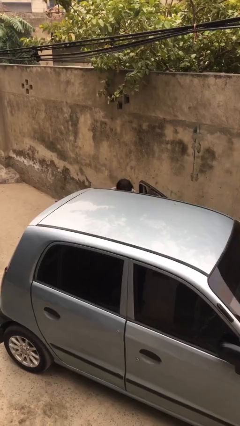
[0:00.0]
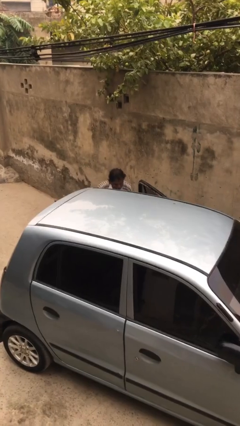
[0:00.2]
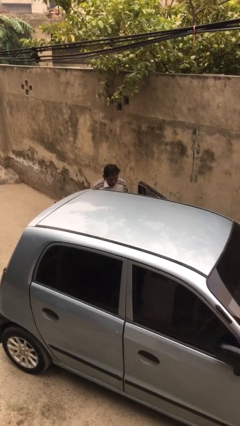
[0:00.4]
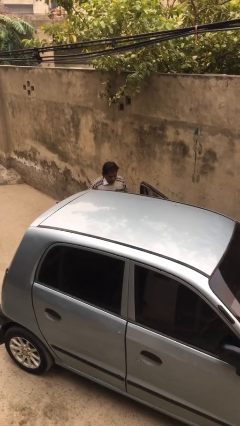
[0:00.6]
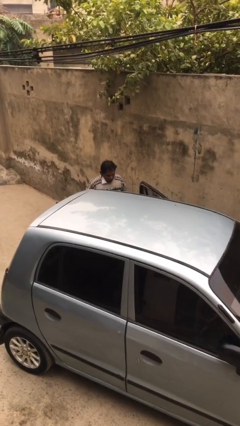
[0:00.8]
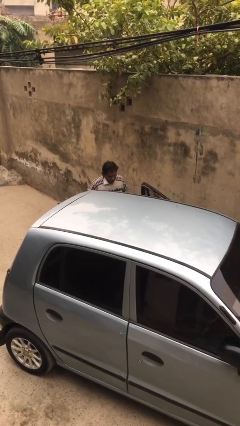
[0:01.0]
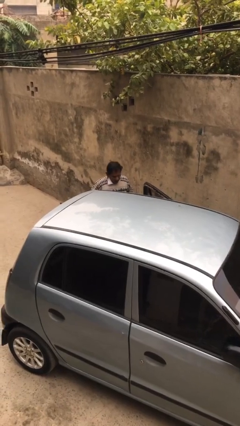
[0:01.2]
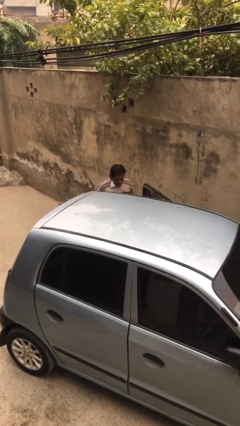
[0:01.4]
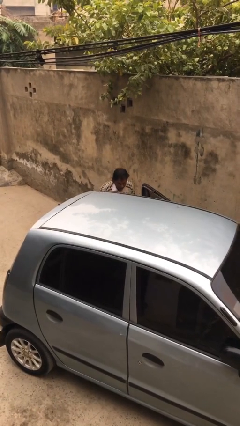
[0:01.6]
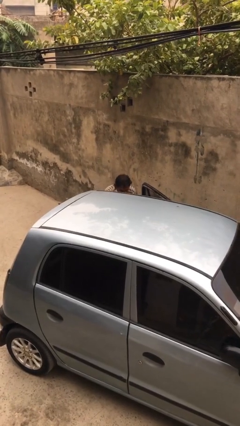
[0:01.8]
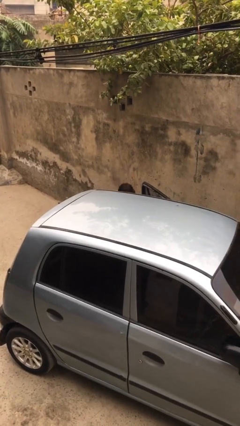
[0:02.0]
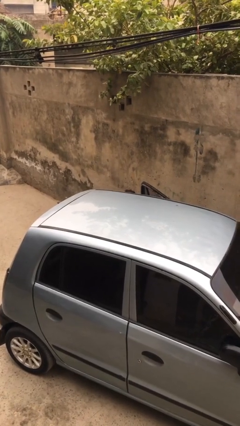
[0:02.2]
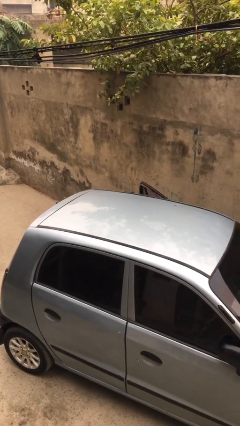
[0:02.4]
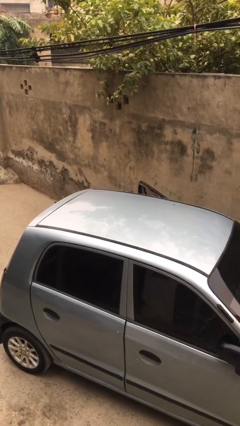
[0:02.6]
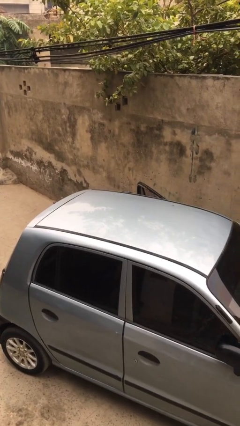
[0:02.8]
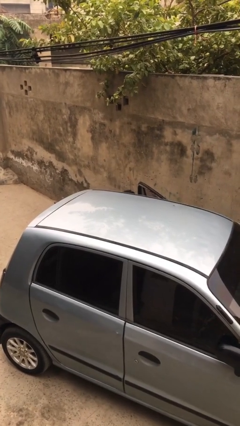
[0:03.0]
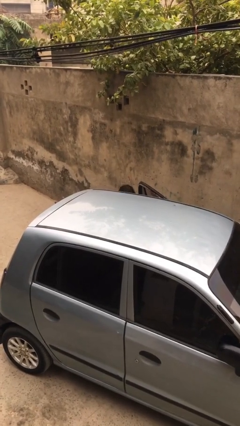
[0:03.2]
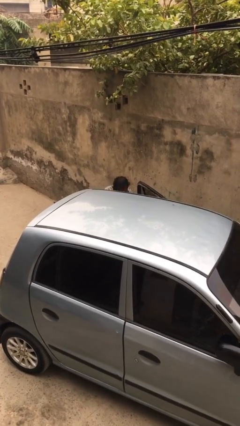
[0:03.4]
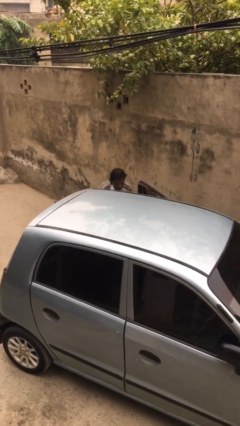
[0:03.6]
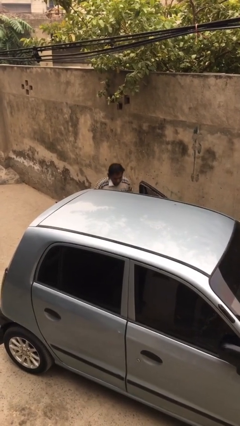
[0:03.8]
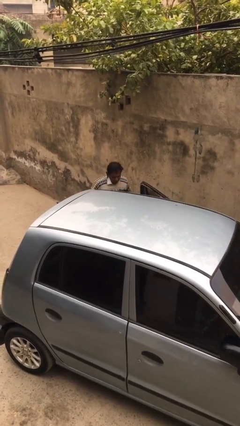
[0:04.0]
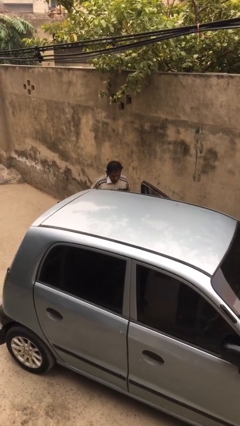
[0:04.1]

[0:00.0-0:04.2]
person unloads car

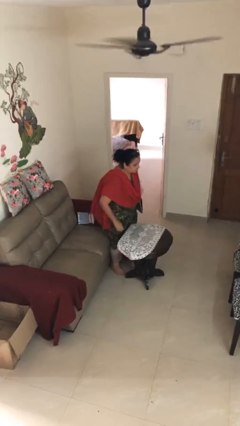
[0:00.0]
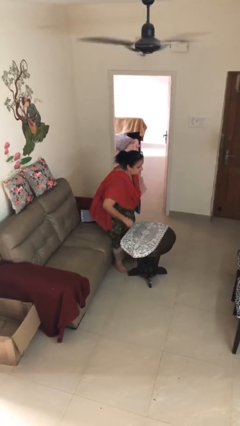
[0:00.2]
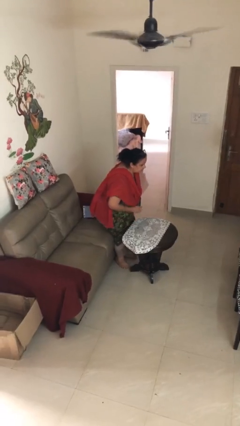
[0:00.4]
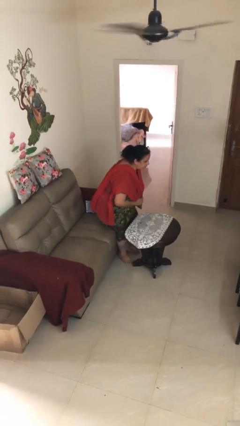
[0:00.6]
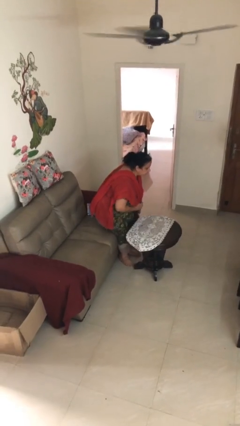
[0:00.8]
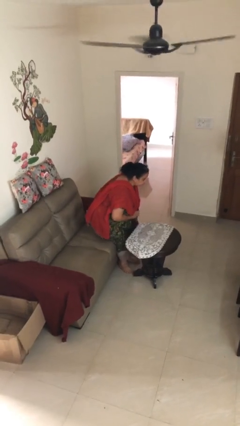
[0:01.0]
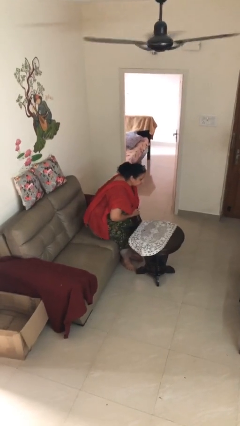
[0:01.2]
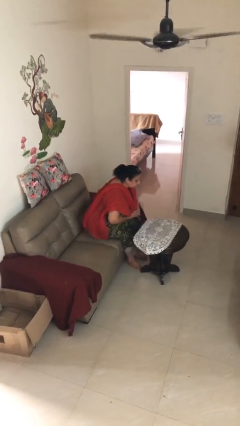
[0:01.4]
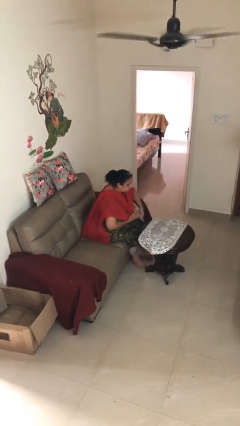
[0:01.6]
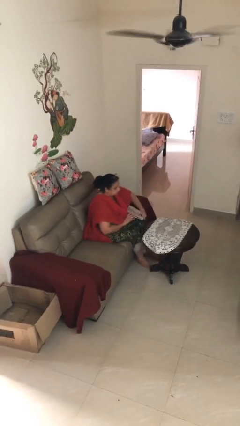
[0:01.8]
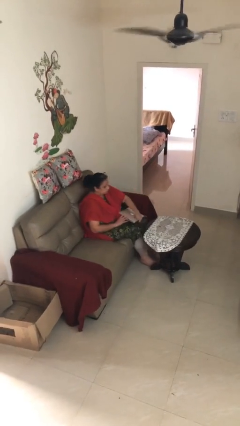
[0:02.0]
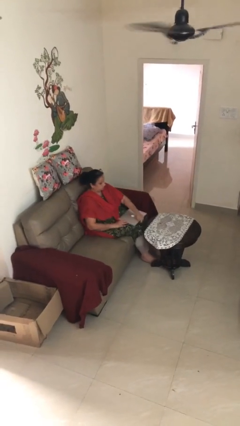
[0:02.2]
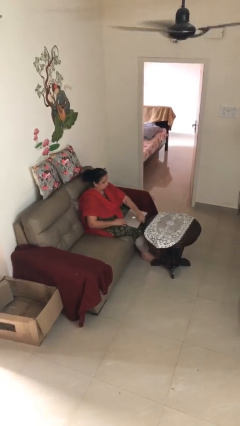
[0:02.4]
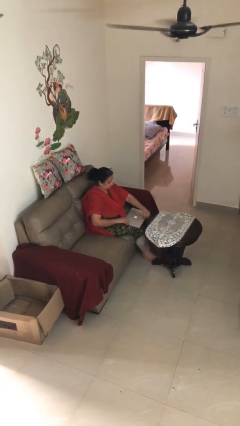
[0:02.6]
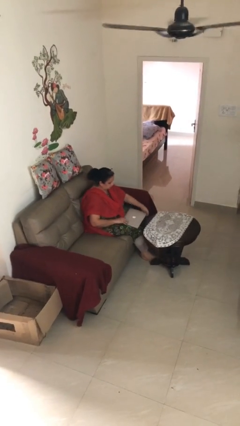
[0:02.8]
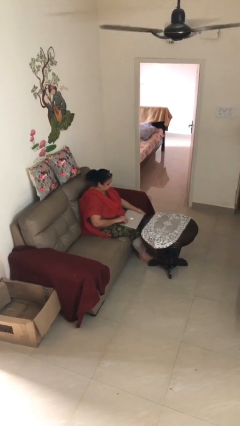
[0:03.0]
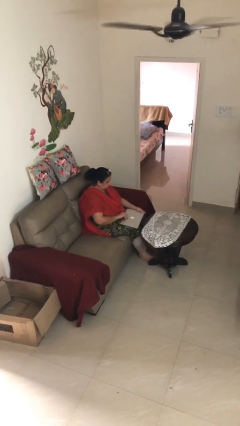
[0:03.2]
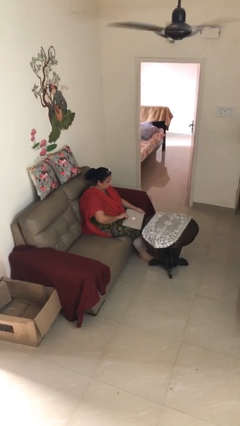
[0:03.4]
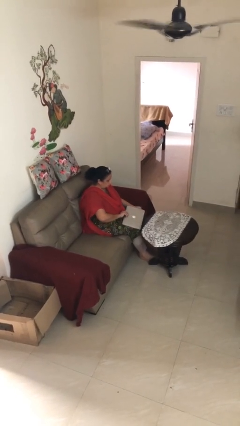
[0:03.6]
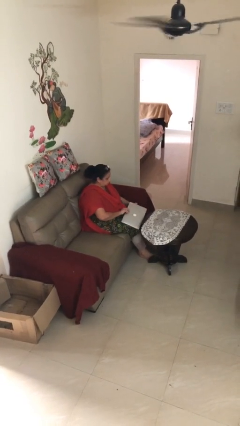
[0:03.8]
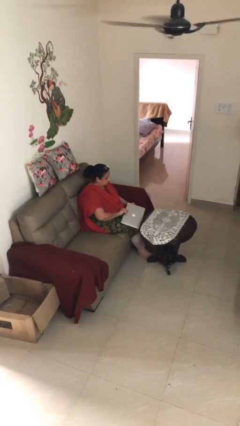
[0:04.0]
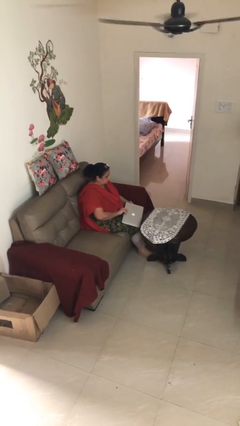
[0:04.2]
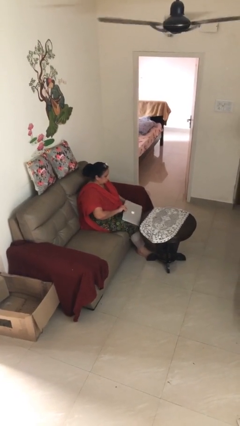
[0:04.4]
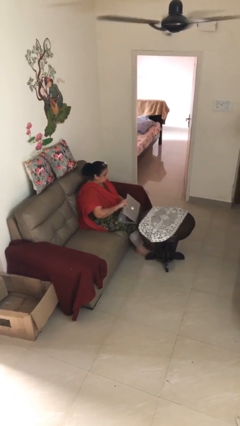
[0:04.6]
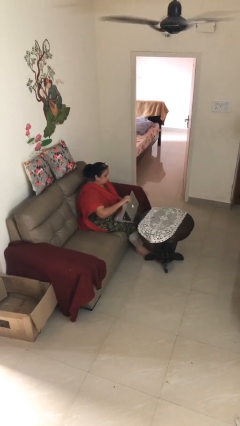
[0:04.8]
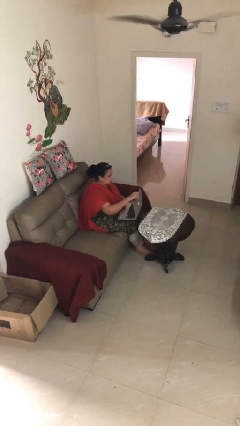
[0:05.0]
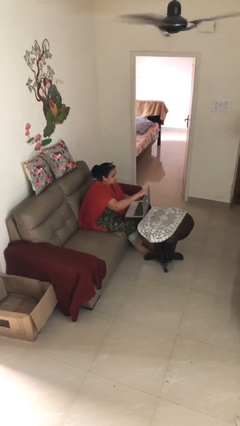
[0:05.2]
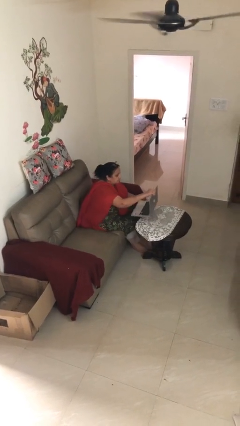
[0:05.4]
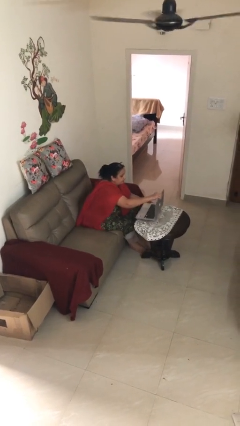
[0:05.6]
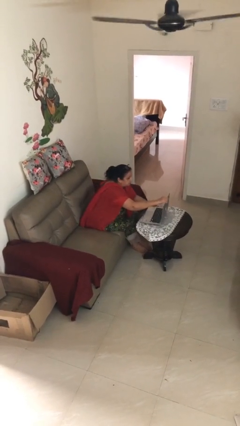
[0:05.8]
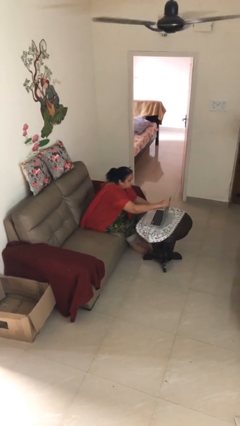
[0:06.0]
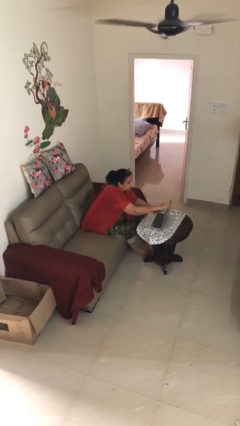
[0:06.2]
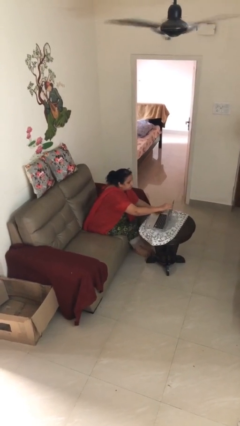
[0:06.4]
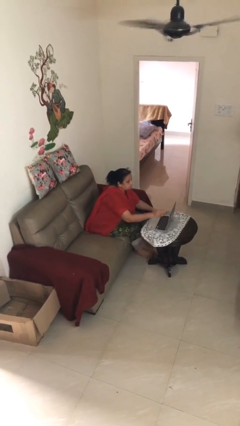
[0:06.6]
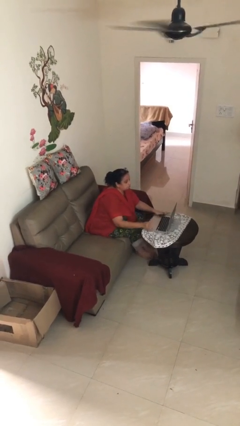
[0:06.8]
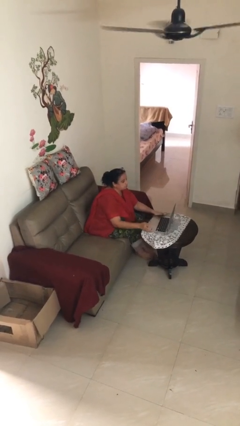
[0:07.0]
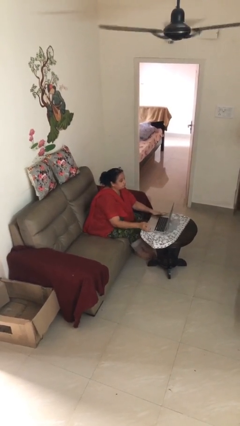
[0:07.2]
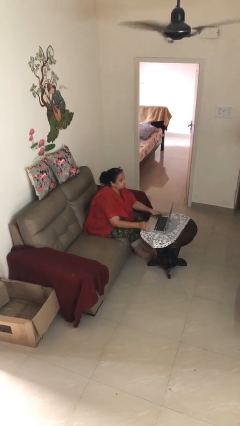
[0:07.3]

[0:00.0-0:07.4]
person sits down

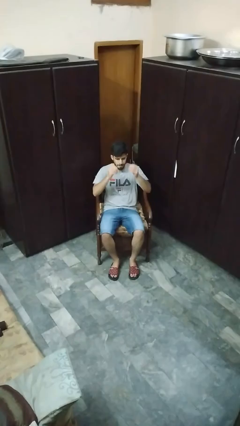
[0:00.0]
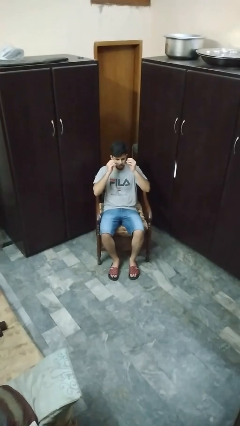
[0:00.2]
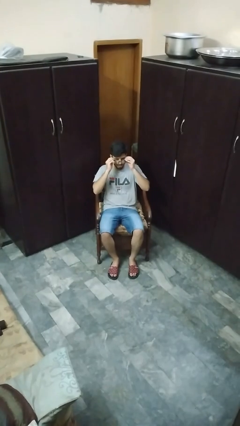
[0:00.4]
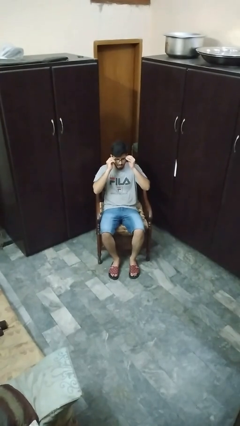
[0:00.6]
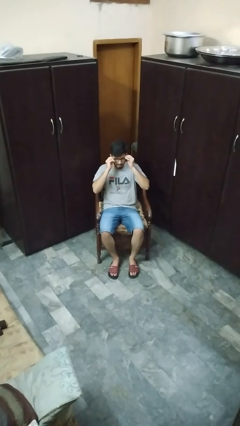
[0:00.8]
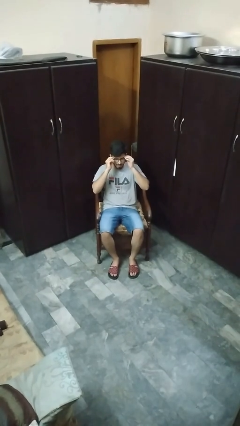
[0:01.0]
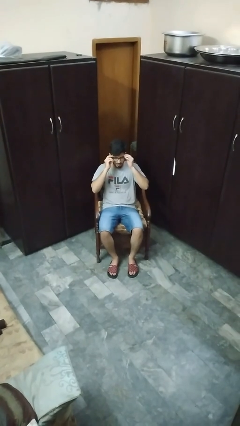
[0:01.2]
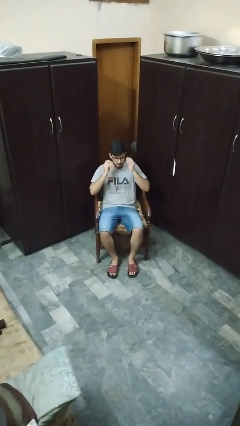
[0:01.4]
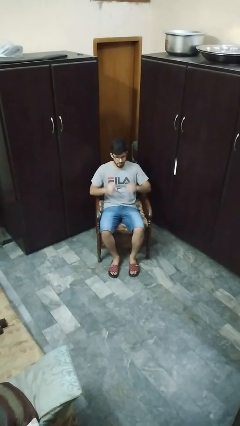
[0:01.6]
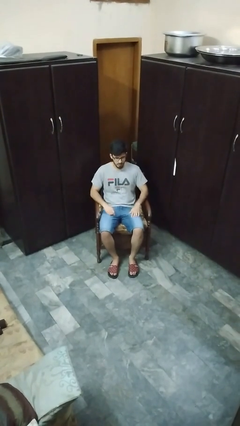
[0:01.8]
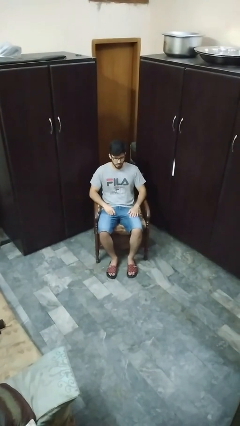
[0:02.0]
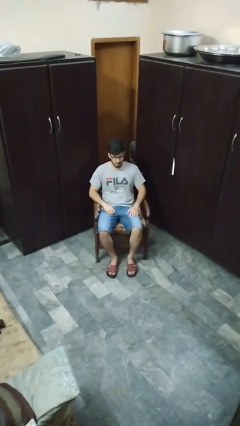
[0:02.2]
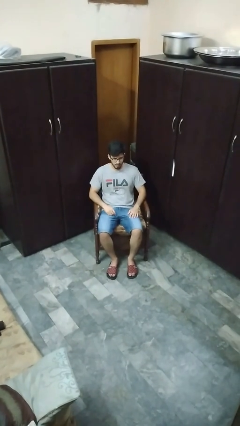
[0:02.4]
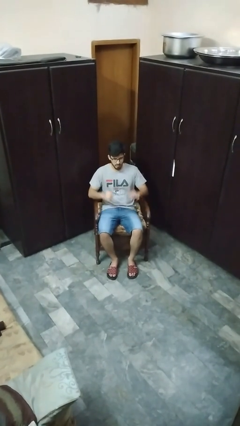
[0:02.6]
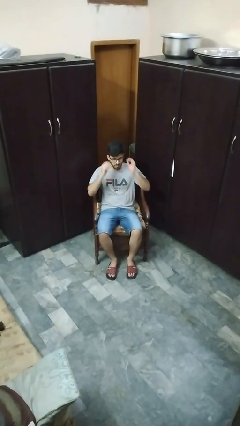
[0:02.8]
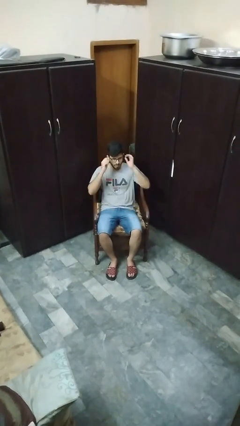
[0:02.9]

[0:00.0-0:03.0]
person puts on glasses

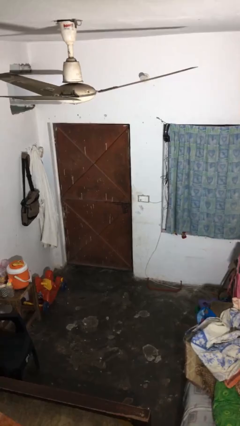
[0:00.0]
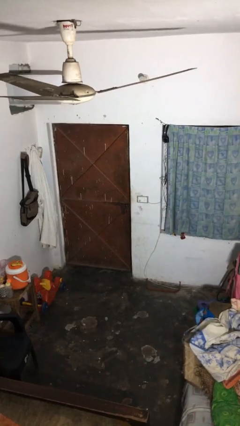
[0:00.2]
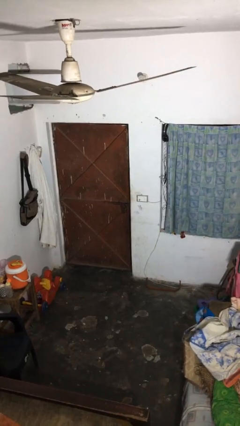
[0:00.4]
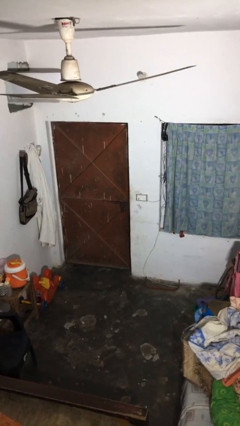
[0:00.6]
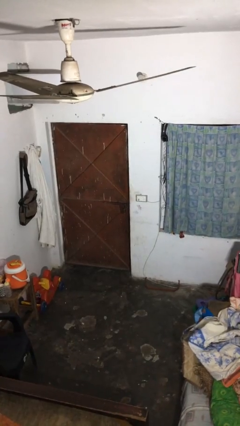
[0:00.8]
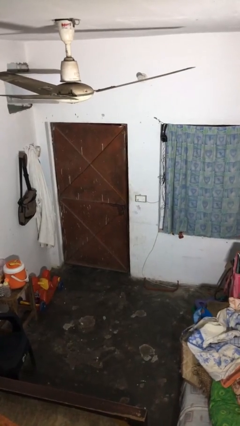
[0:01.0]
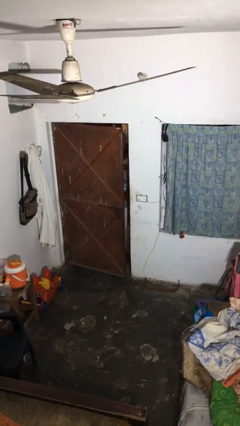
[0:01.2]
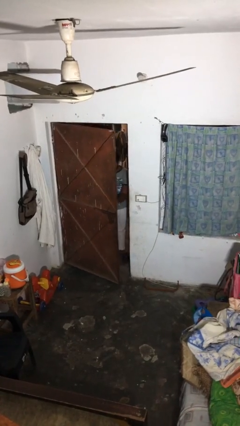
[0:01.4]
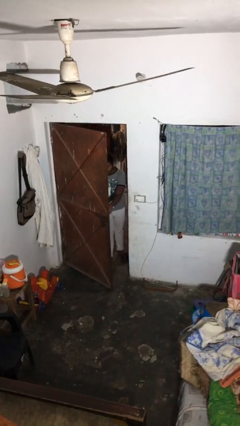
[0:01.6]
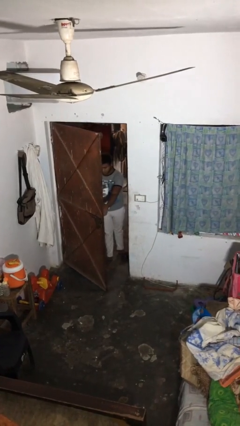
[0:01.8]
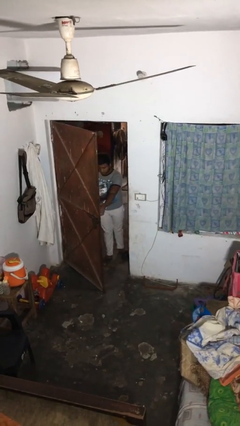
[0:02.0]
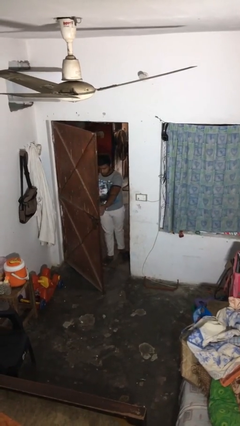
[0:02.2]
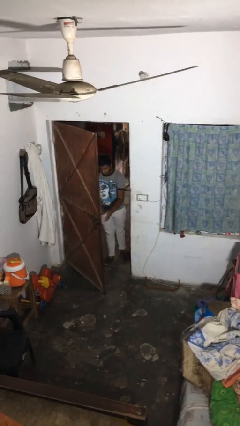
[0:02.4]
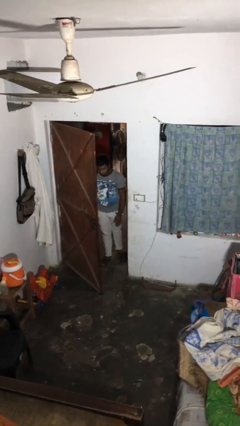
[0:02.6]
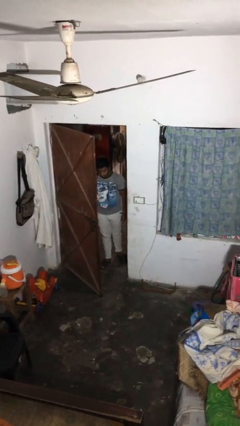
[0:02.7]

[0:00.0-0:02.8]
person opens facility door

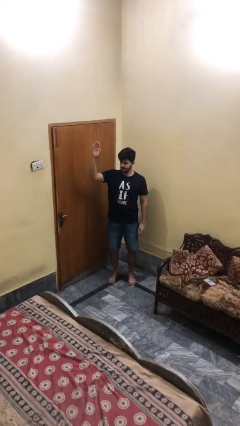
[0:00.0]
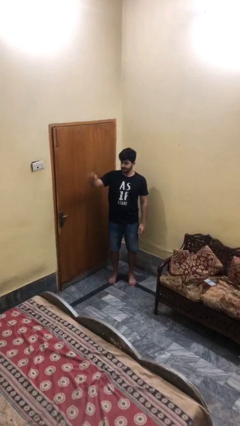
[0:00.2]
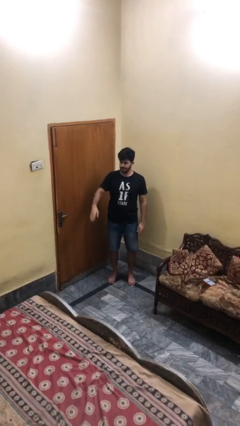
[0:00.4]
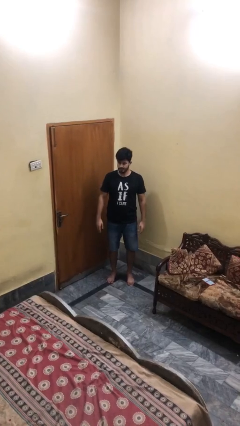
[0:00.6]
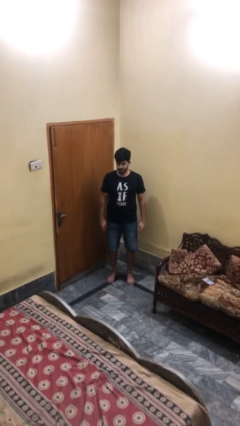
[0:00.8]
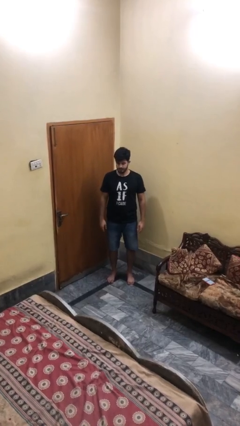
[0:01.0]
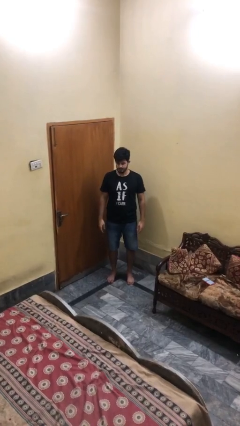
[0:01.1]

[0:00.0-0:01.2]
person gestures lower hand
